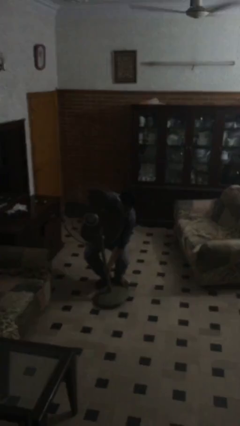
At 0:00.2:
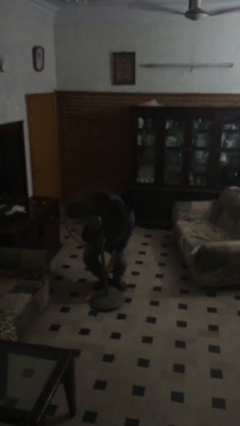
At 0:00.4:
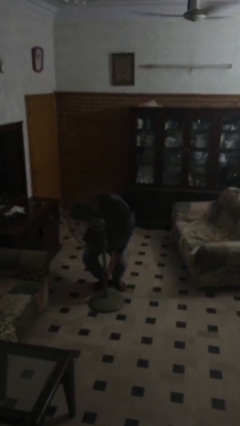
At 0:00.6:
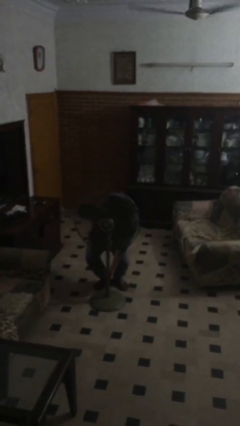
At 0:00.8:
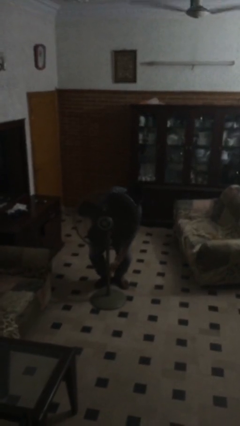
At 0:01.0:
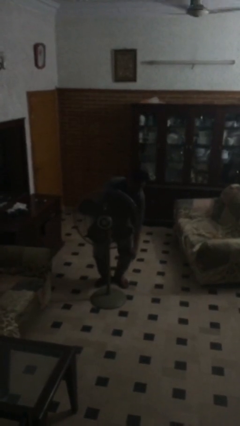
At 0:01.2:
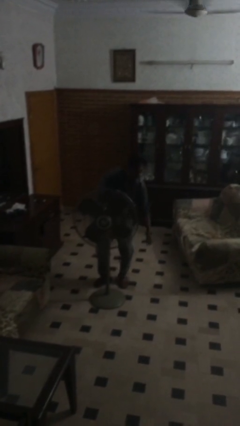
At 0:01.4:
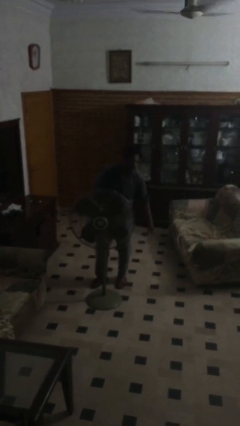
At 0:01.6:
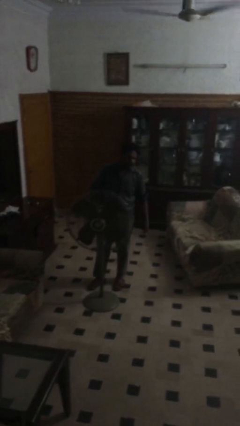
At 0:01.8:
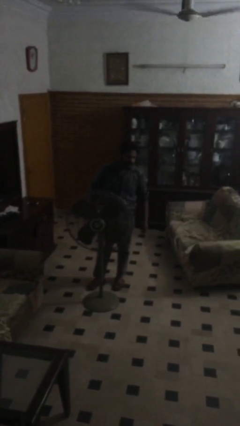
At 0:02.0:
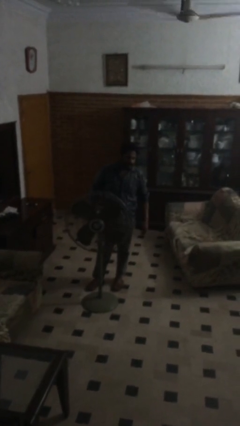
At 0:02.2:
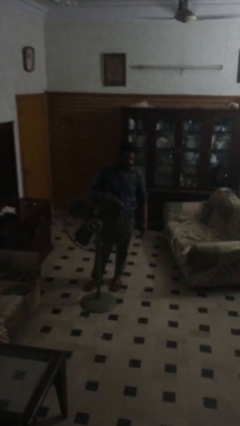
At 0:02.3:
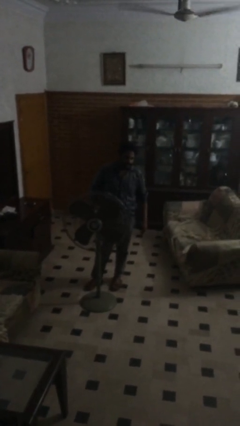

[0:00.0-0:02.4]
person puts down object on floor

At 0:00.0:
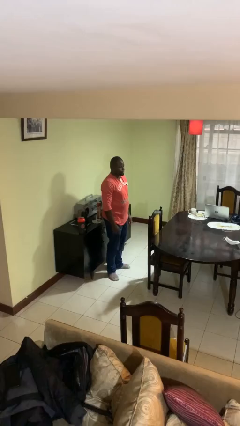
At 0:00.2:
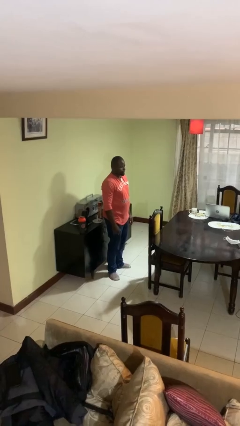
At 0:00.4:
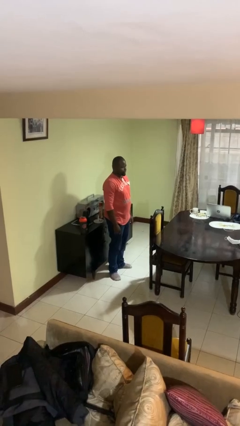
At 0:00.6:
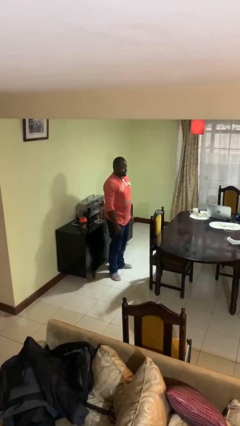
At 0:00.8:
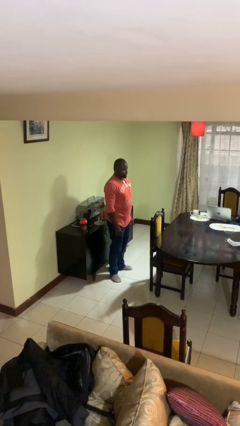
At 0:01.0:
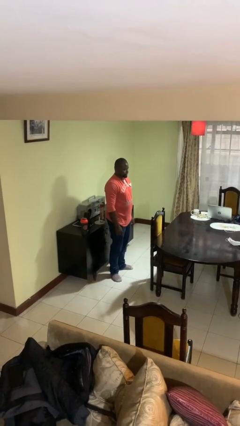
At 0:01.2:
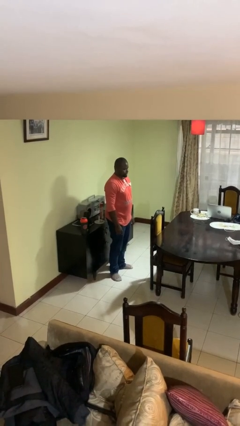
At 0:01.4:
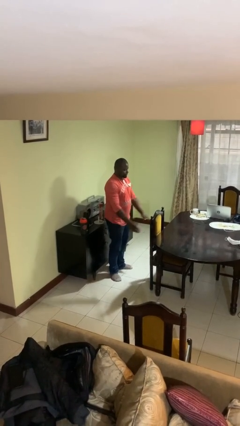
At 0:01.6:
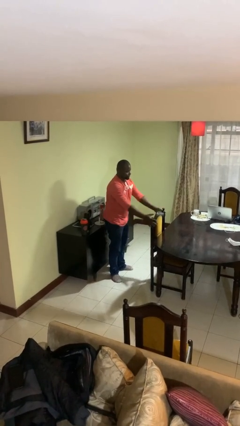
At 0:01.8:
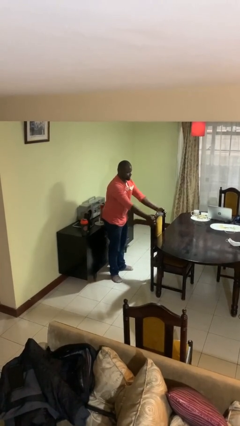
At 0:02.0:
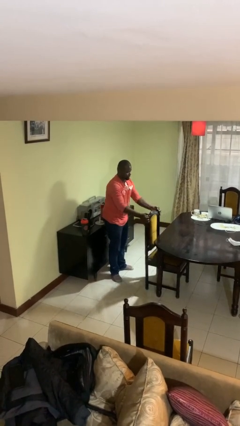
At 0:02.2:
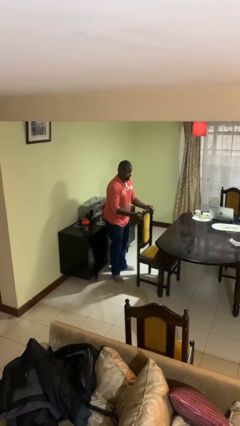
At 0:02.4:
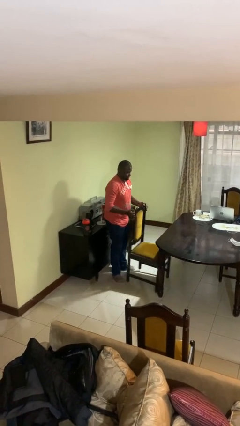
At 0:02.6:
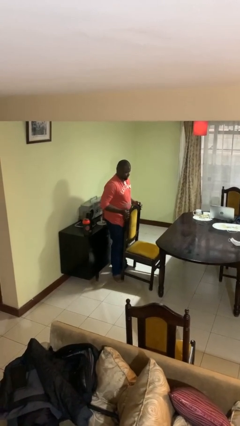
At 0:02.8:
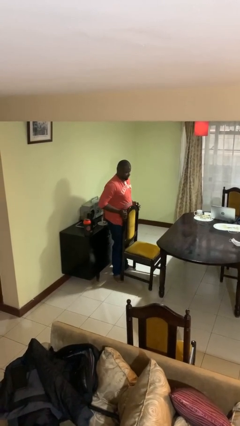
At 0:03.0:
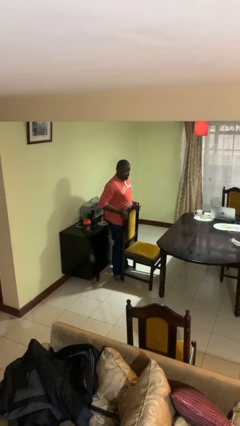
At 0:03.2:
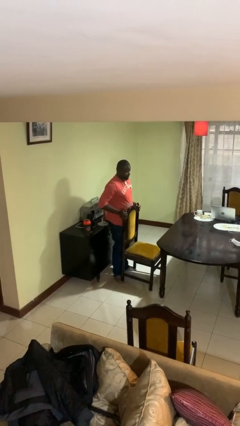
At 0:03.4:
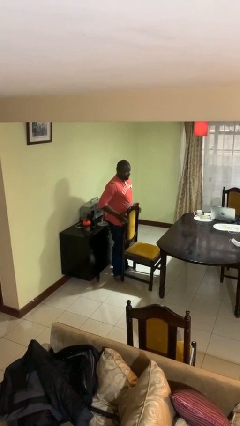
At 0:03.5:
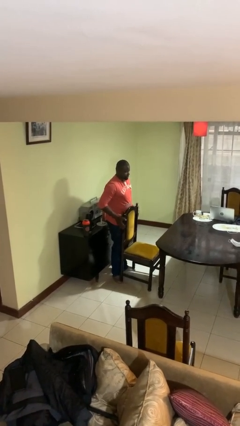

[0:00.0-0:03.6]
person pulls out chair

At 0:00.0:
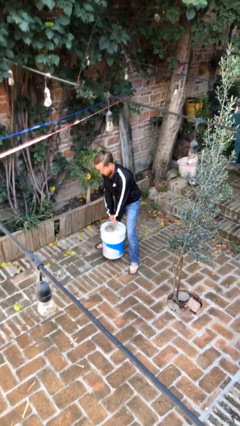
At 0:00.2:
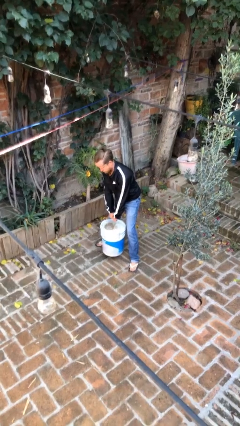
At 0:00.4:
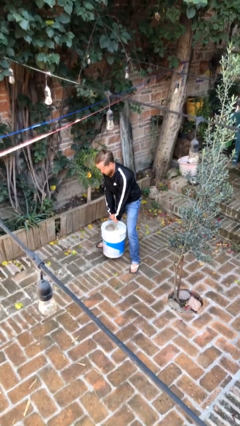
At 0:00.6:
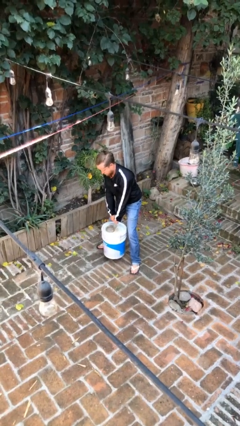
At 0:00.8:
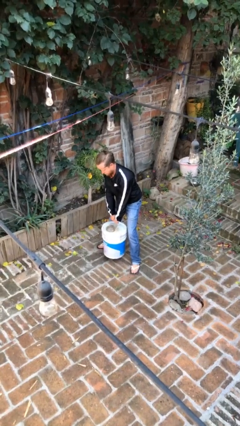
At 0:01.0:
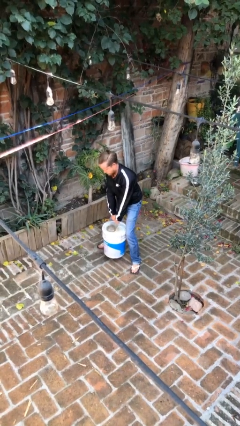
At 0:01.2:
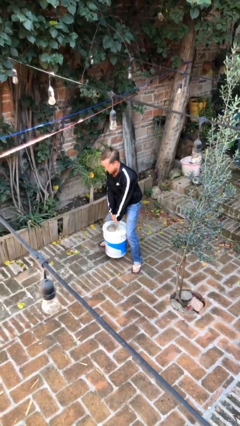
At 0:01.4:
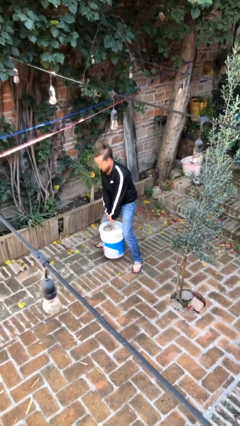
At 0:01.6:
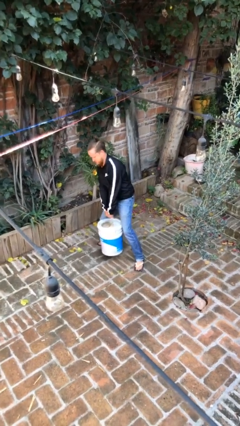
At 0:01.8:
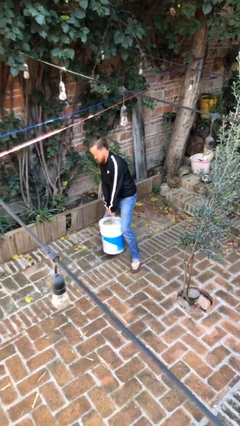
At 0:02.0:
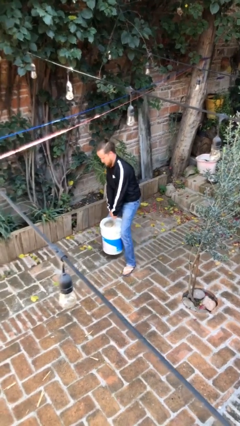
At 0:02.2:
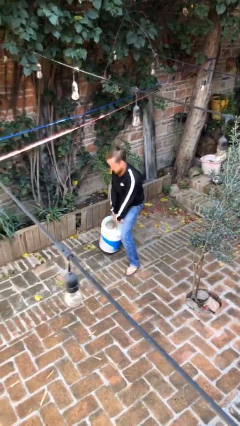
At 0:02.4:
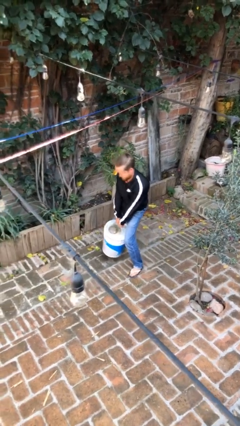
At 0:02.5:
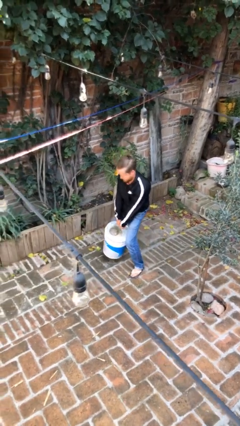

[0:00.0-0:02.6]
person carries heavy object

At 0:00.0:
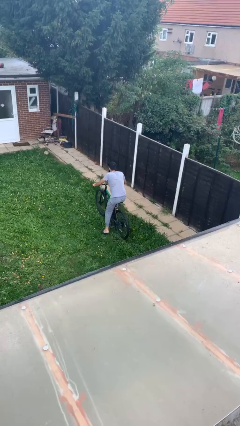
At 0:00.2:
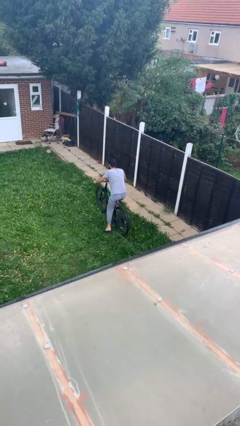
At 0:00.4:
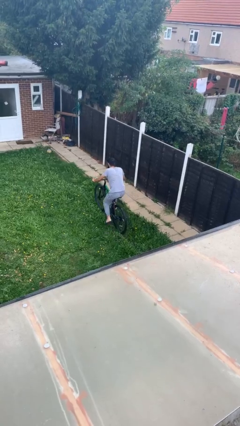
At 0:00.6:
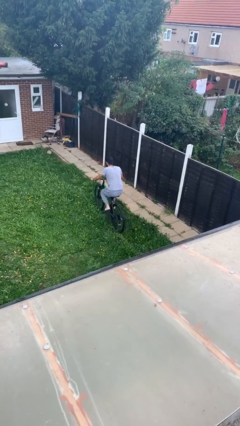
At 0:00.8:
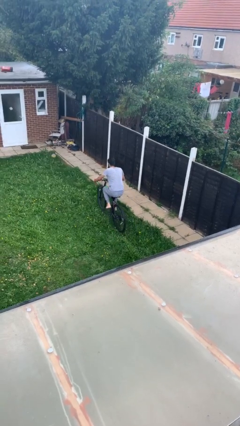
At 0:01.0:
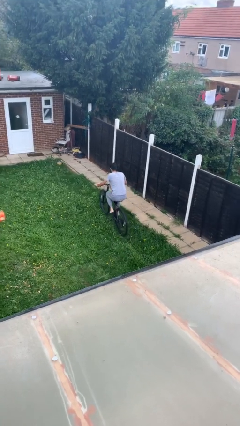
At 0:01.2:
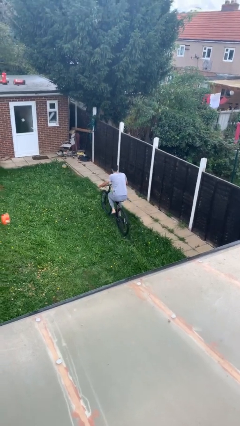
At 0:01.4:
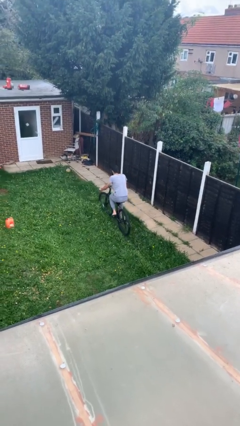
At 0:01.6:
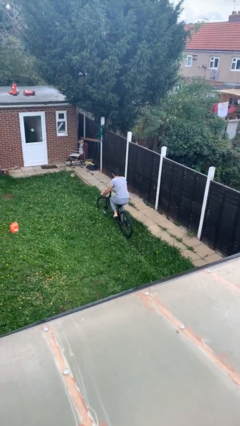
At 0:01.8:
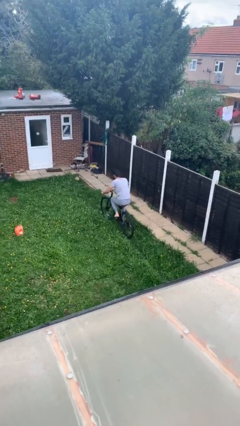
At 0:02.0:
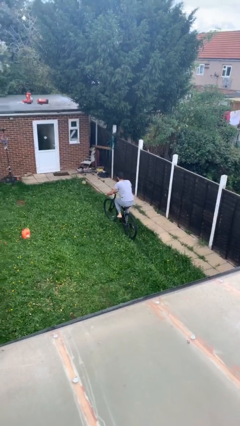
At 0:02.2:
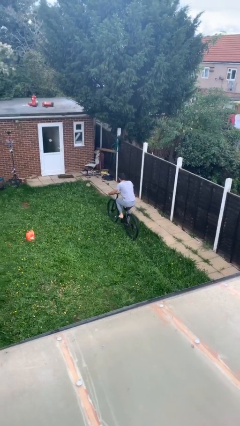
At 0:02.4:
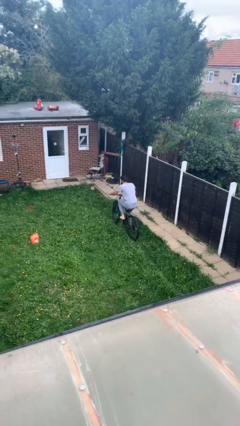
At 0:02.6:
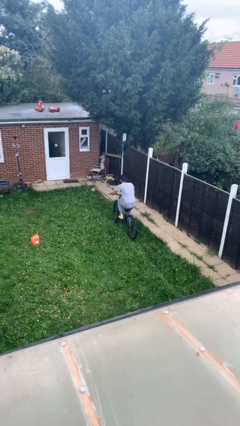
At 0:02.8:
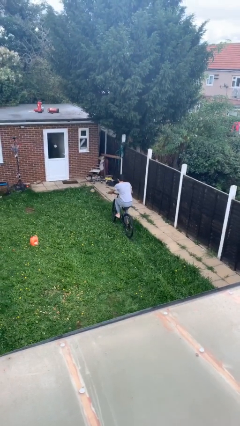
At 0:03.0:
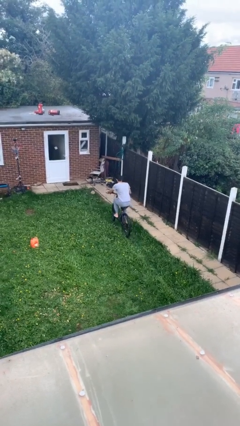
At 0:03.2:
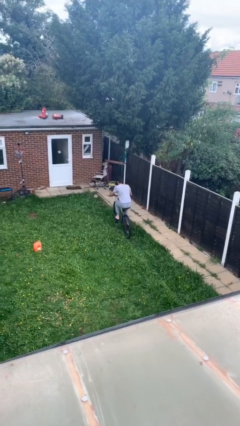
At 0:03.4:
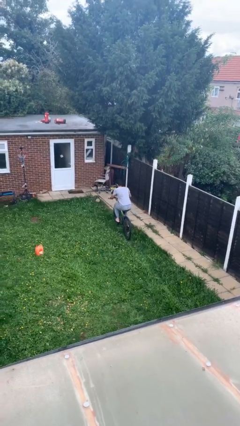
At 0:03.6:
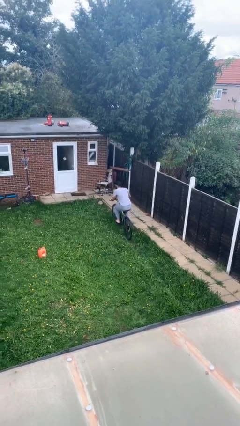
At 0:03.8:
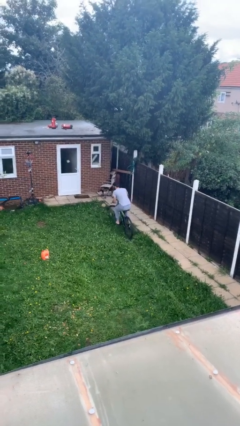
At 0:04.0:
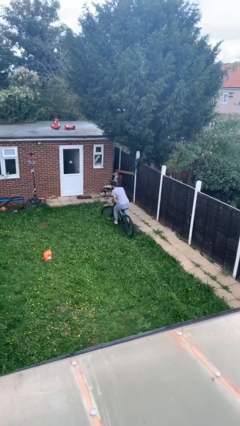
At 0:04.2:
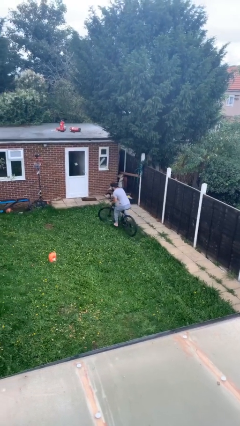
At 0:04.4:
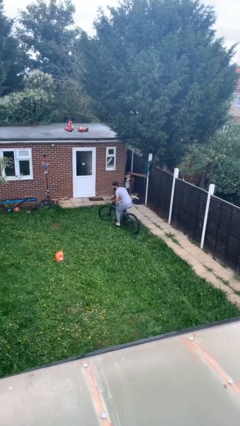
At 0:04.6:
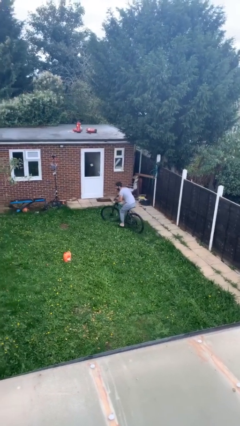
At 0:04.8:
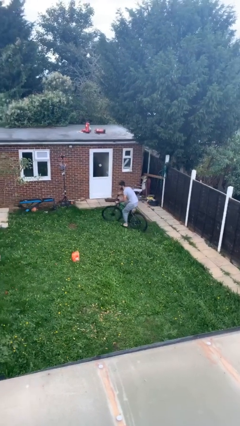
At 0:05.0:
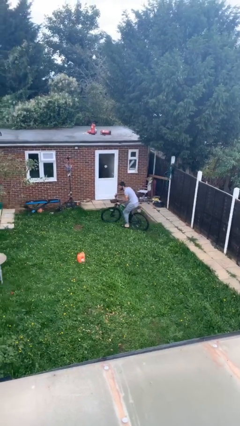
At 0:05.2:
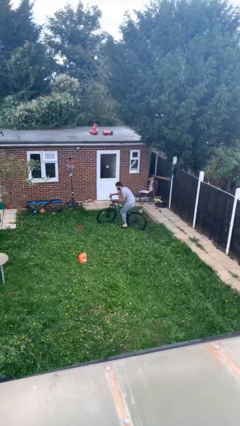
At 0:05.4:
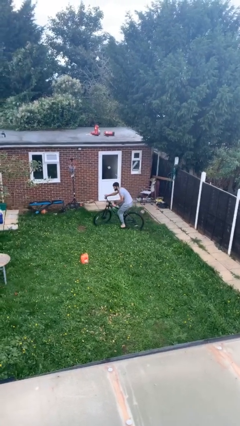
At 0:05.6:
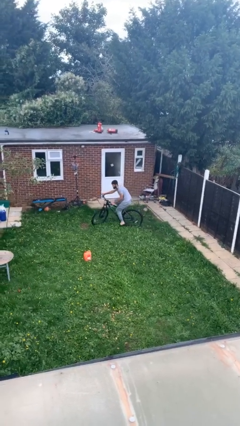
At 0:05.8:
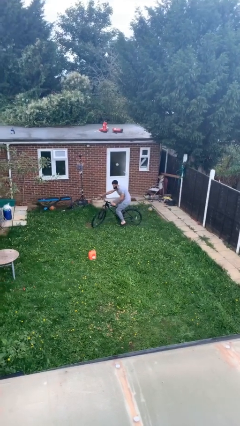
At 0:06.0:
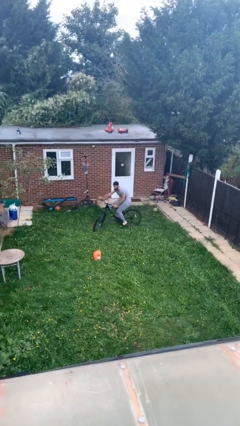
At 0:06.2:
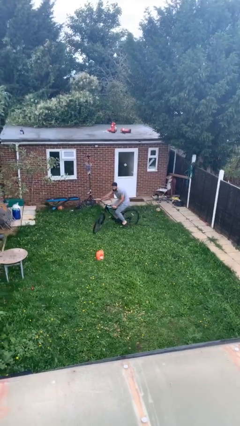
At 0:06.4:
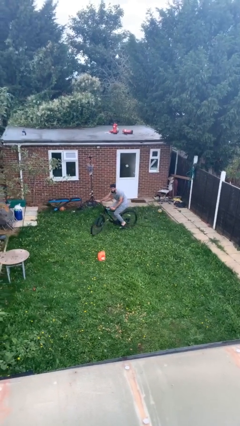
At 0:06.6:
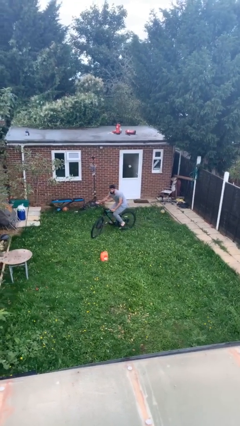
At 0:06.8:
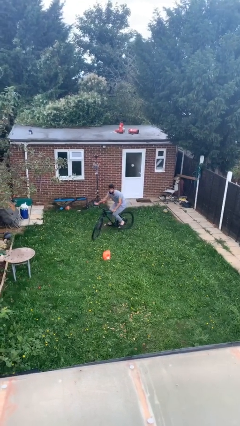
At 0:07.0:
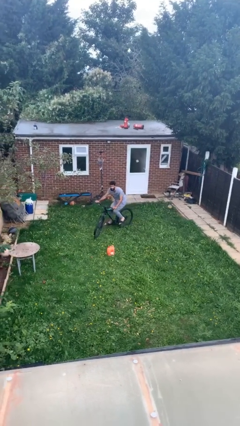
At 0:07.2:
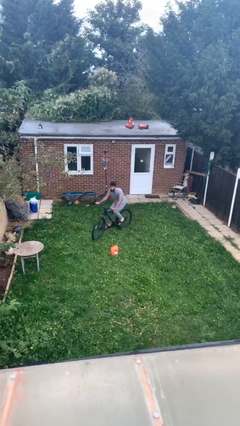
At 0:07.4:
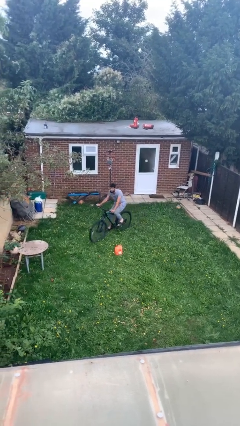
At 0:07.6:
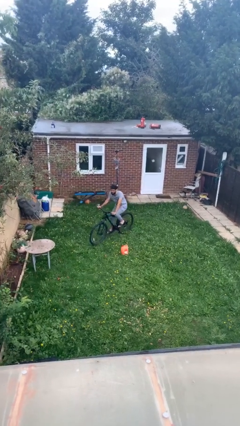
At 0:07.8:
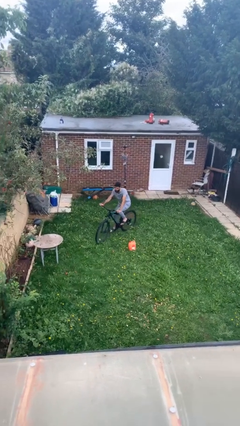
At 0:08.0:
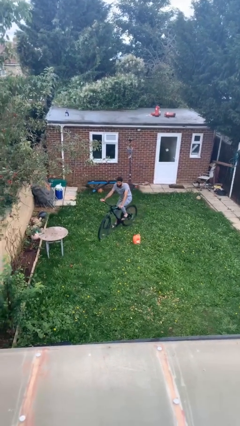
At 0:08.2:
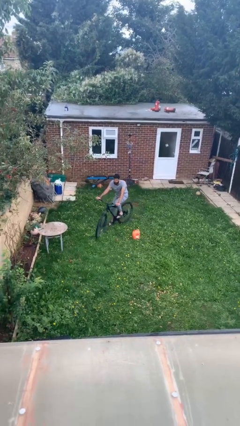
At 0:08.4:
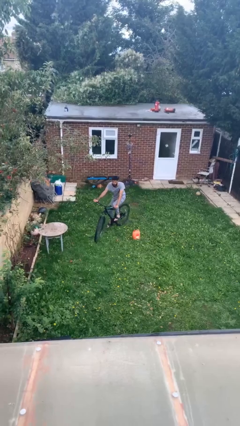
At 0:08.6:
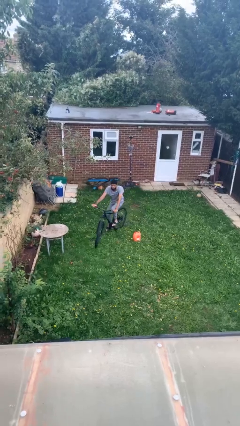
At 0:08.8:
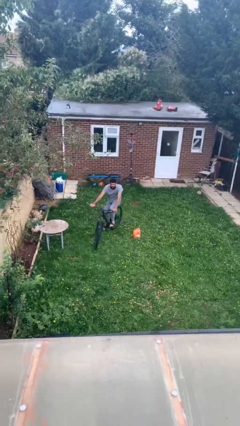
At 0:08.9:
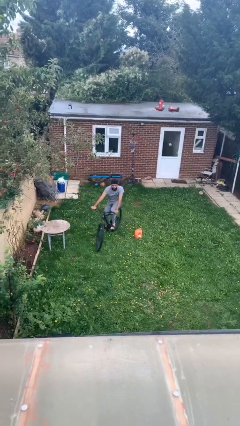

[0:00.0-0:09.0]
person rides bicycle

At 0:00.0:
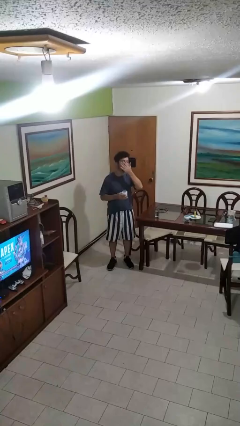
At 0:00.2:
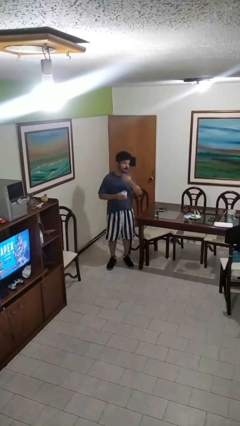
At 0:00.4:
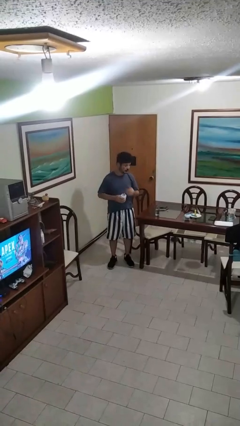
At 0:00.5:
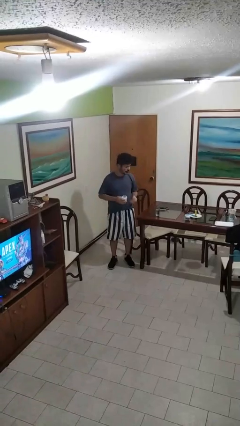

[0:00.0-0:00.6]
person takes medicine pills
